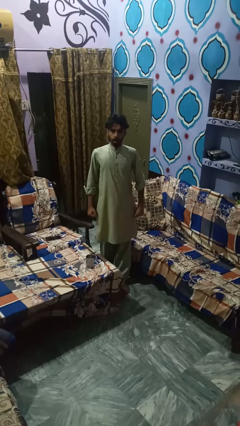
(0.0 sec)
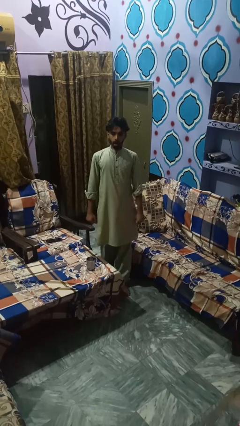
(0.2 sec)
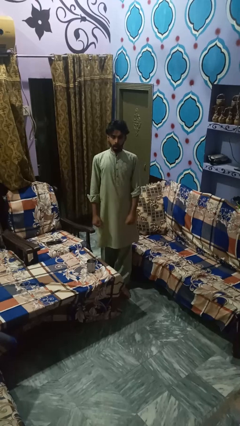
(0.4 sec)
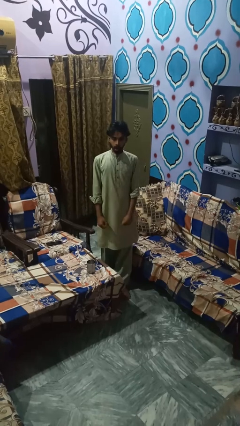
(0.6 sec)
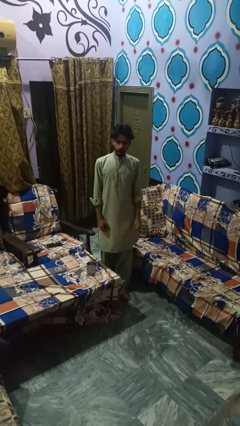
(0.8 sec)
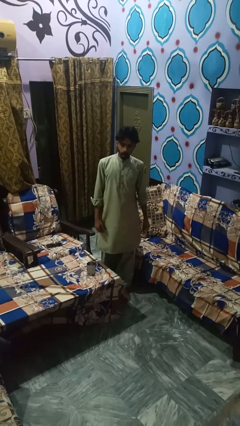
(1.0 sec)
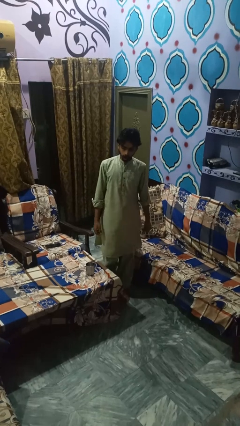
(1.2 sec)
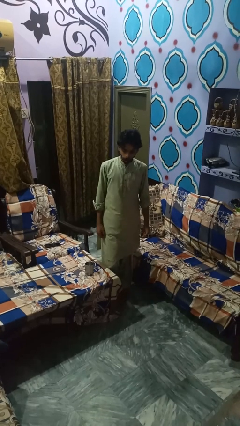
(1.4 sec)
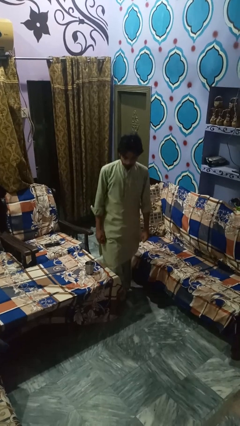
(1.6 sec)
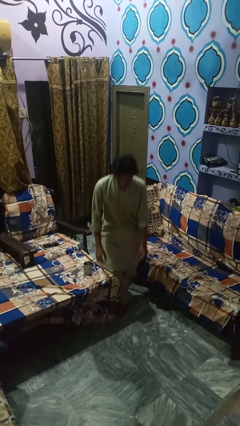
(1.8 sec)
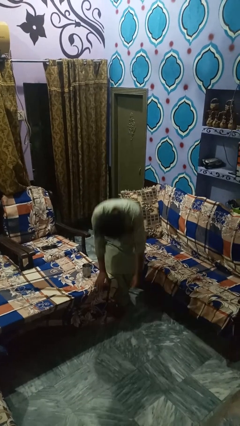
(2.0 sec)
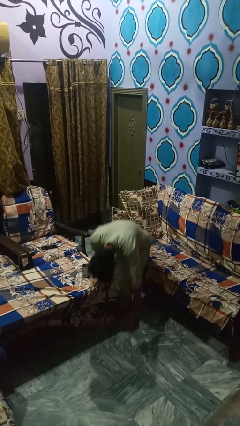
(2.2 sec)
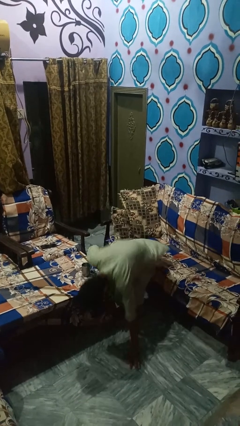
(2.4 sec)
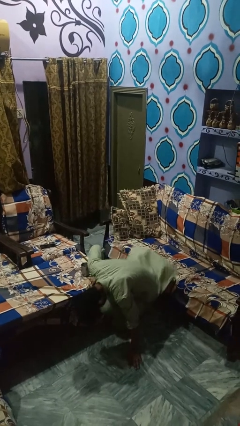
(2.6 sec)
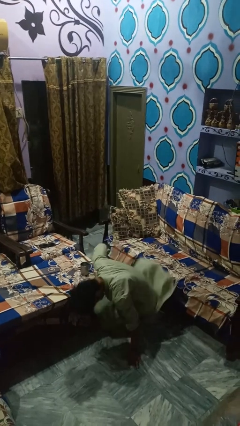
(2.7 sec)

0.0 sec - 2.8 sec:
person trips on object on floor

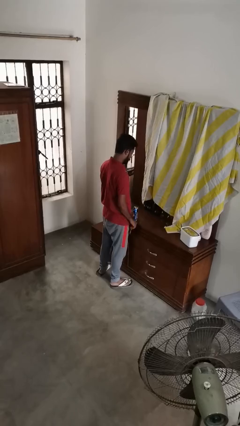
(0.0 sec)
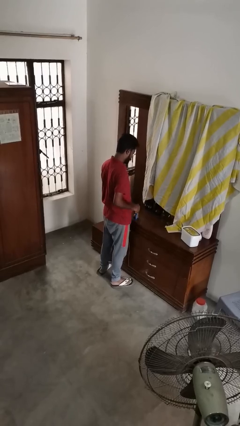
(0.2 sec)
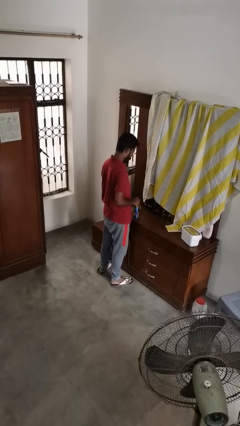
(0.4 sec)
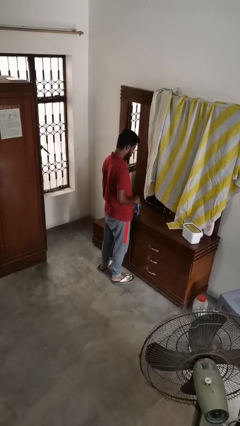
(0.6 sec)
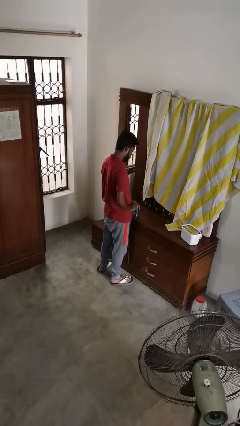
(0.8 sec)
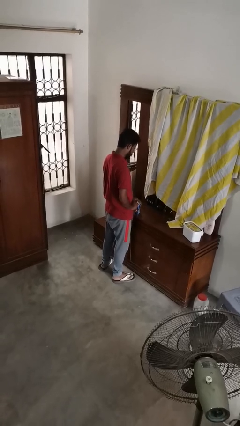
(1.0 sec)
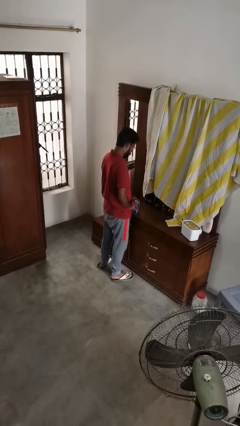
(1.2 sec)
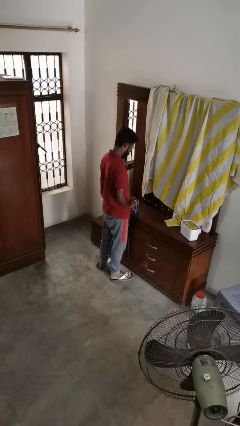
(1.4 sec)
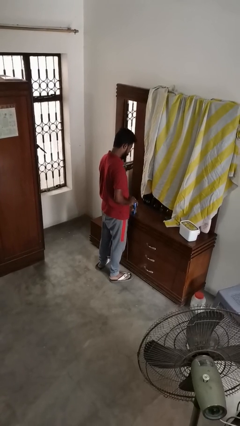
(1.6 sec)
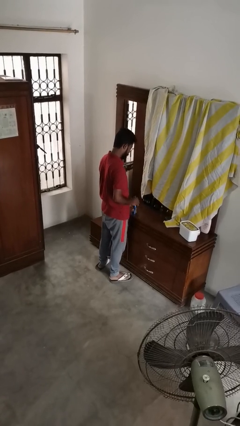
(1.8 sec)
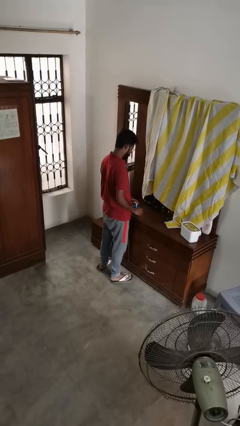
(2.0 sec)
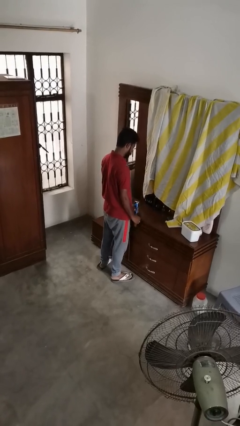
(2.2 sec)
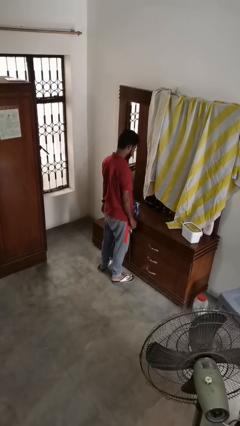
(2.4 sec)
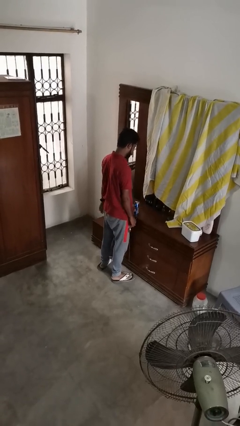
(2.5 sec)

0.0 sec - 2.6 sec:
person opens can with can opener

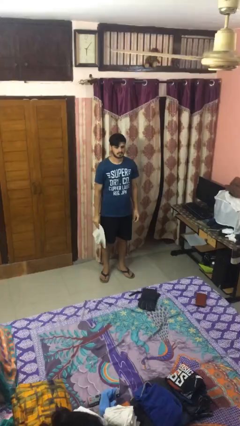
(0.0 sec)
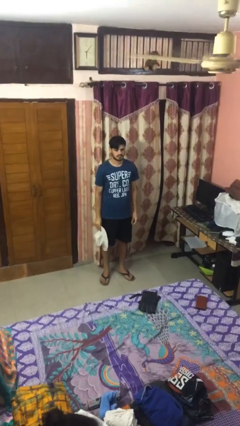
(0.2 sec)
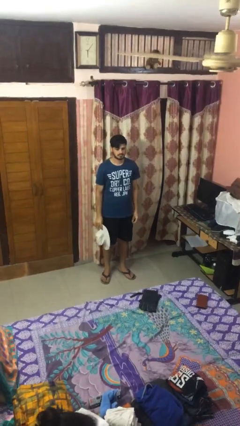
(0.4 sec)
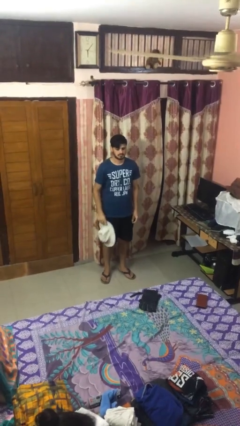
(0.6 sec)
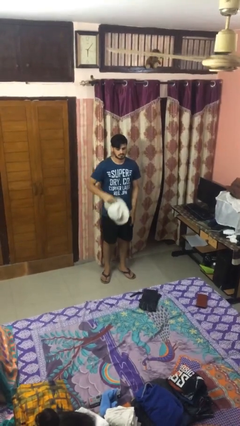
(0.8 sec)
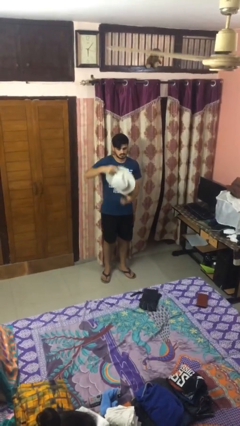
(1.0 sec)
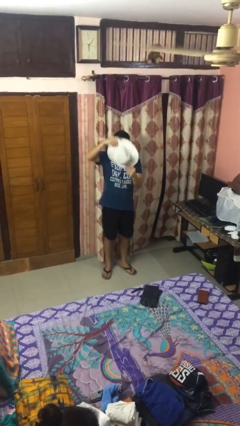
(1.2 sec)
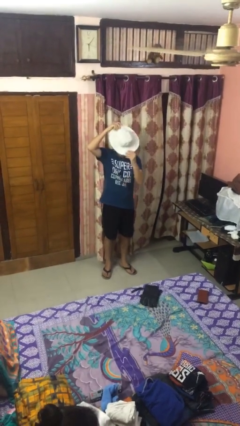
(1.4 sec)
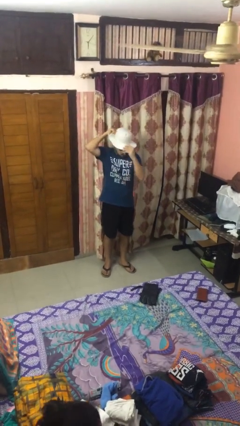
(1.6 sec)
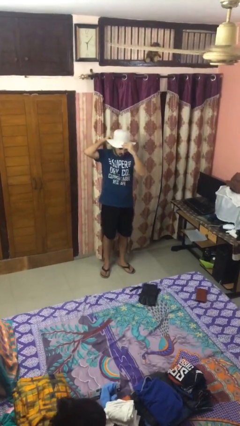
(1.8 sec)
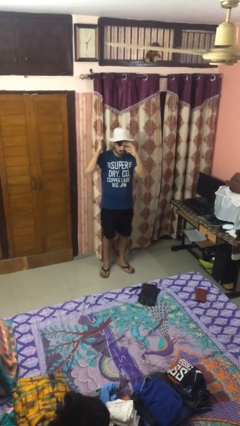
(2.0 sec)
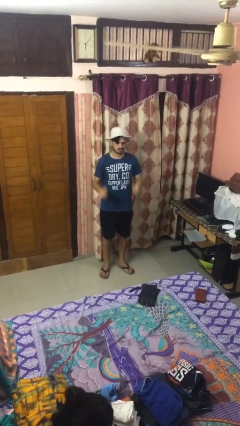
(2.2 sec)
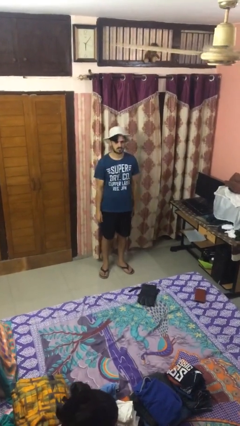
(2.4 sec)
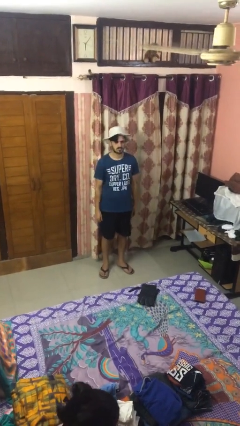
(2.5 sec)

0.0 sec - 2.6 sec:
person puts on hat

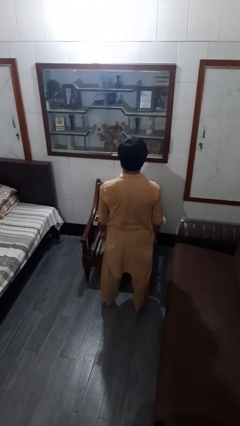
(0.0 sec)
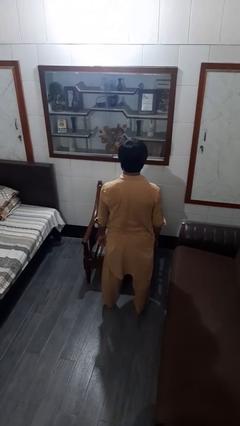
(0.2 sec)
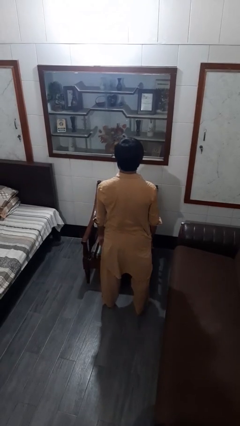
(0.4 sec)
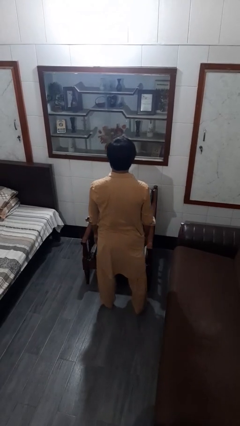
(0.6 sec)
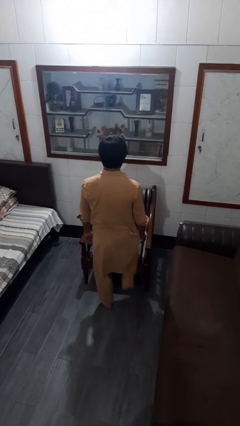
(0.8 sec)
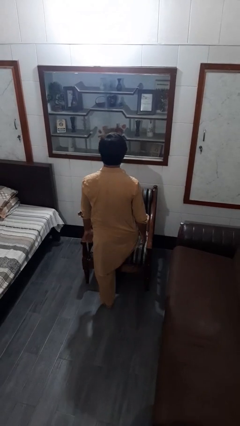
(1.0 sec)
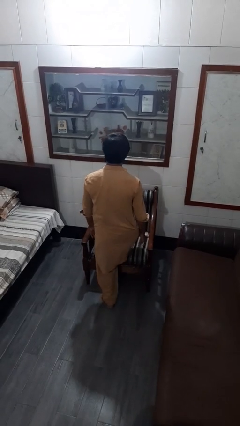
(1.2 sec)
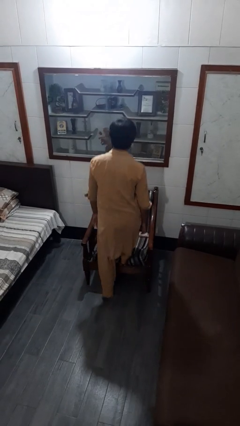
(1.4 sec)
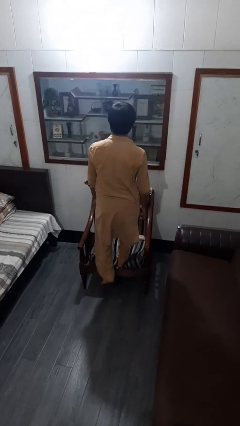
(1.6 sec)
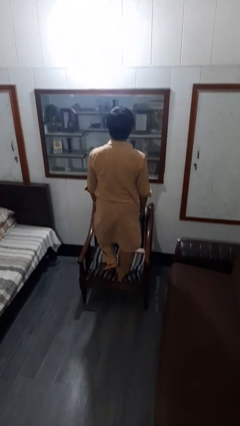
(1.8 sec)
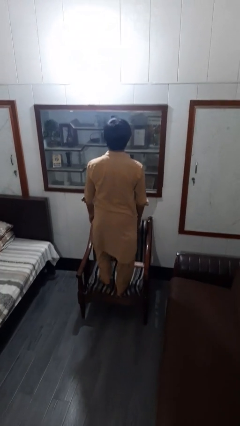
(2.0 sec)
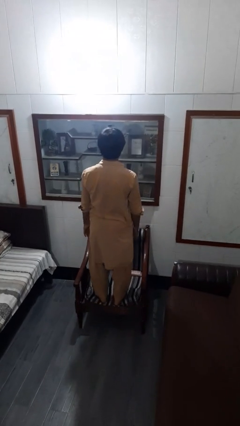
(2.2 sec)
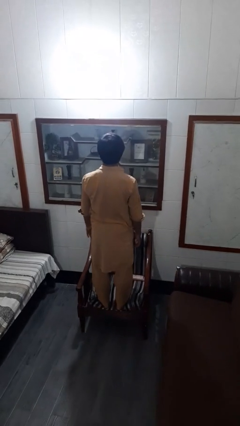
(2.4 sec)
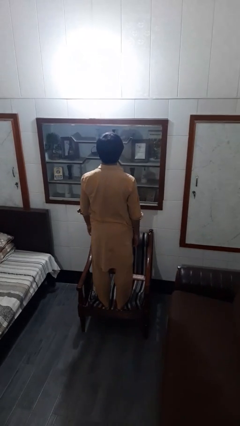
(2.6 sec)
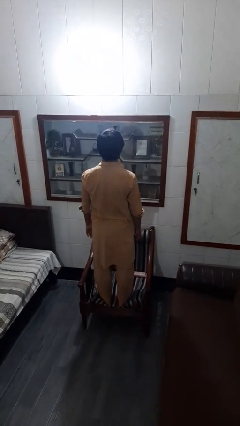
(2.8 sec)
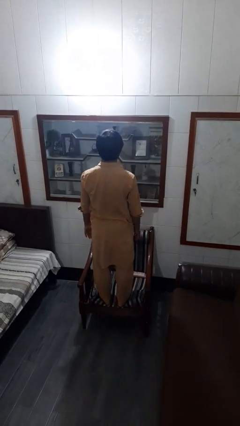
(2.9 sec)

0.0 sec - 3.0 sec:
person climbs on chair

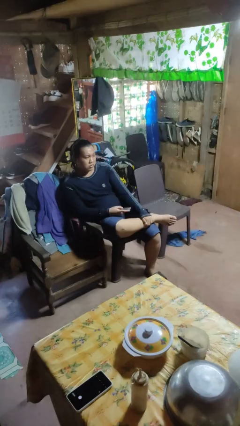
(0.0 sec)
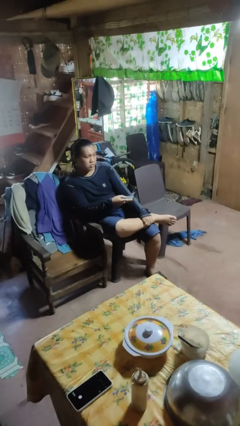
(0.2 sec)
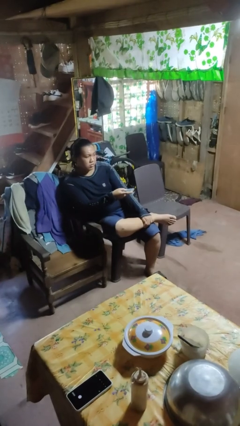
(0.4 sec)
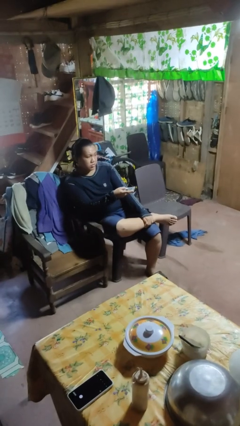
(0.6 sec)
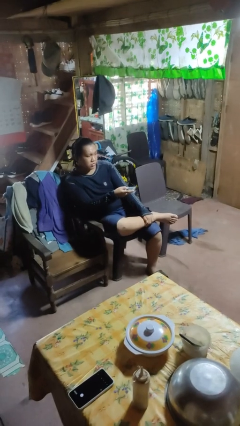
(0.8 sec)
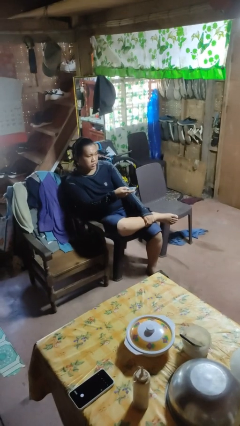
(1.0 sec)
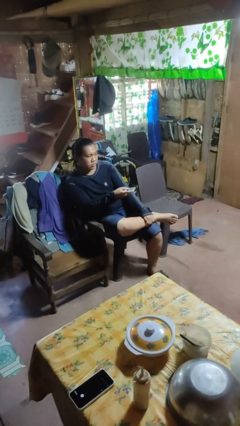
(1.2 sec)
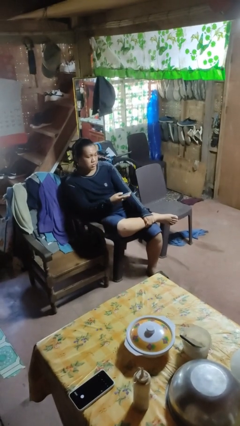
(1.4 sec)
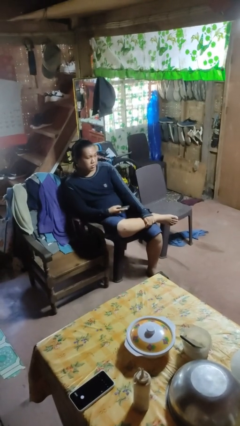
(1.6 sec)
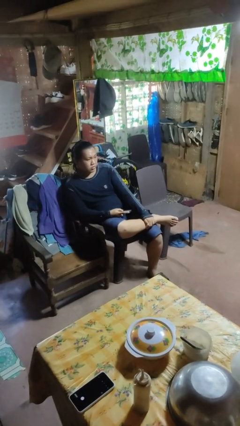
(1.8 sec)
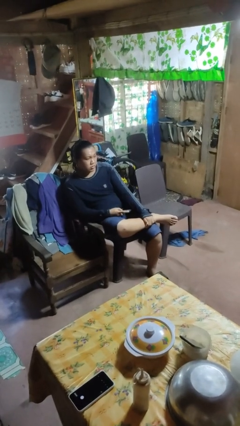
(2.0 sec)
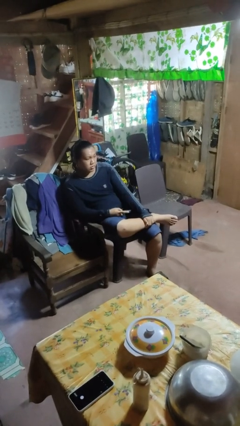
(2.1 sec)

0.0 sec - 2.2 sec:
person uses television remote

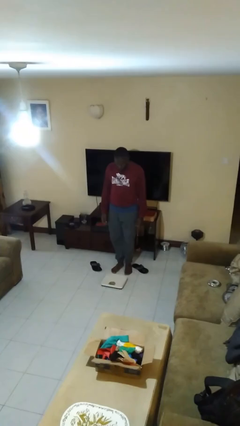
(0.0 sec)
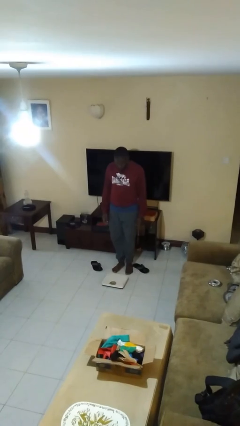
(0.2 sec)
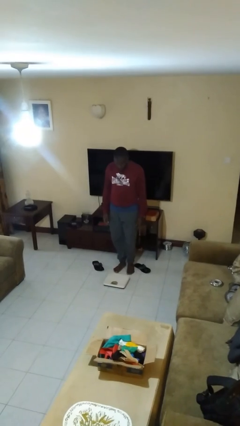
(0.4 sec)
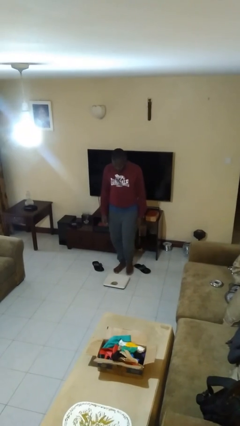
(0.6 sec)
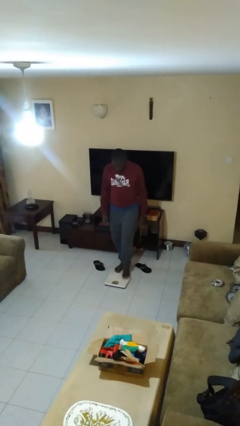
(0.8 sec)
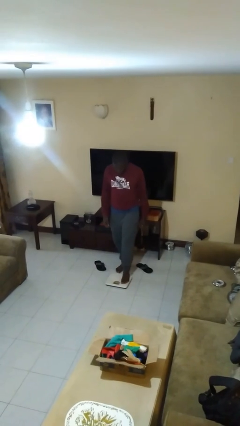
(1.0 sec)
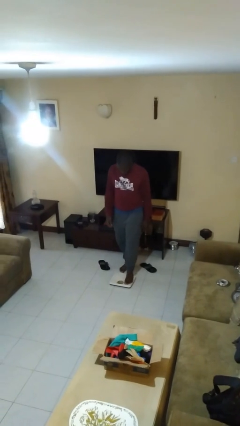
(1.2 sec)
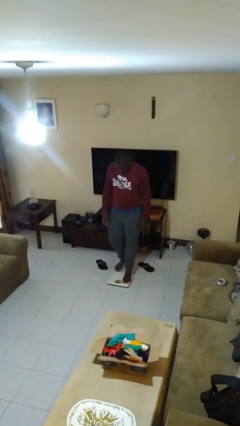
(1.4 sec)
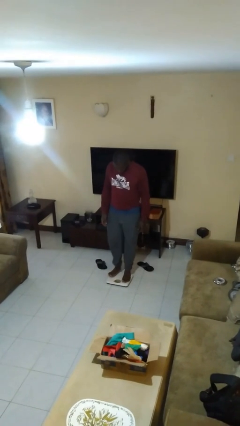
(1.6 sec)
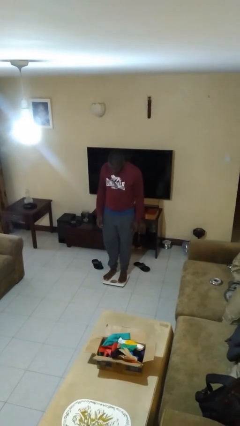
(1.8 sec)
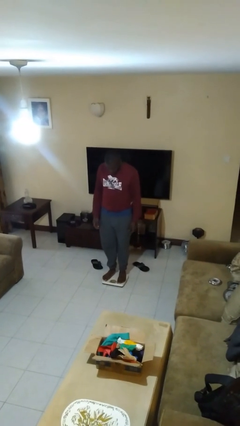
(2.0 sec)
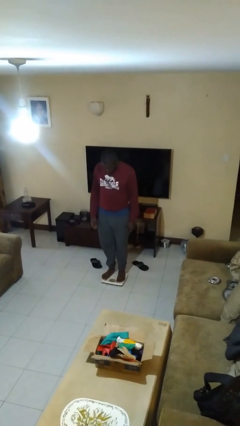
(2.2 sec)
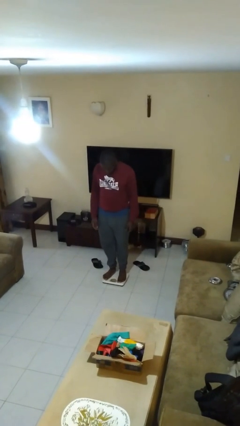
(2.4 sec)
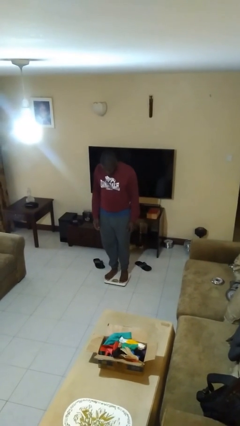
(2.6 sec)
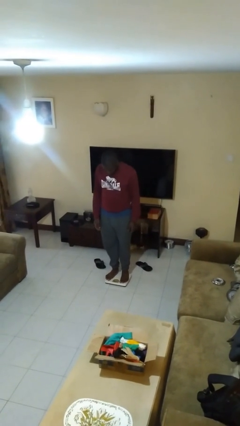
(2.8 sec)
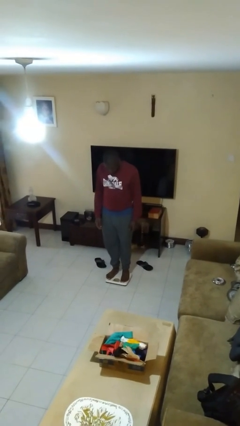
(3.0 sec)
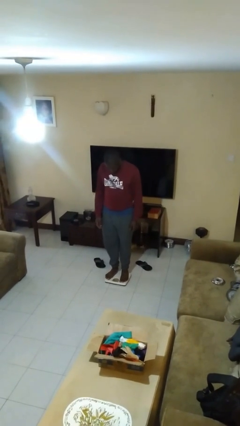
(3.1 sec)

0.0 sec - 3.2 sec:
person uses bodyweight scale

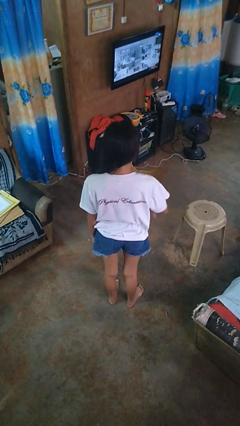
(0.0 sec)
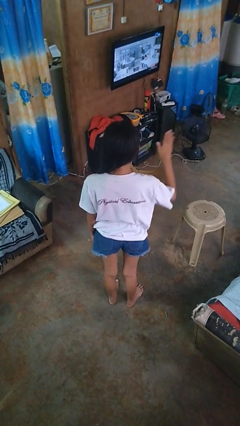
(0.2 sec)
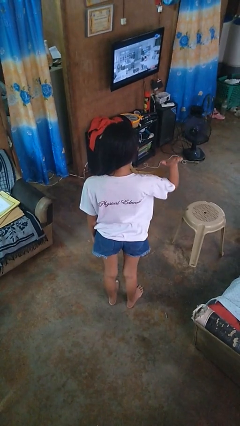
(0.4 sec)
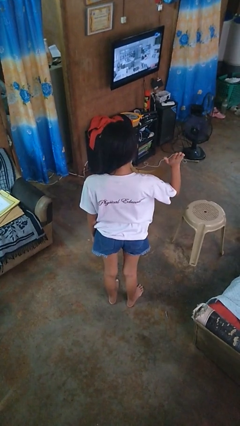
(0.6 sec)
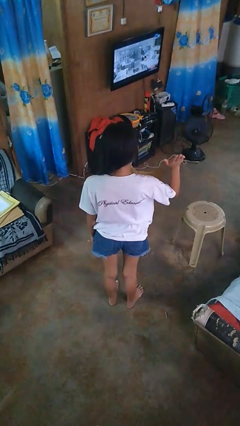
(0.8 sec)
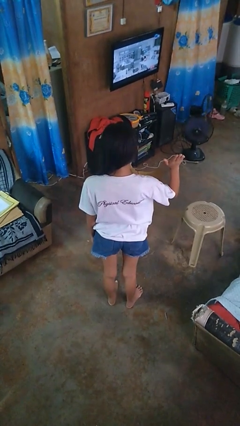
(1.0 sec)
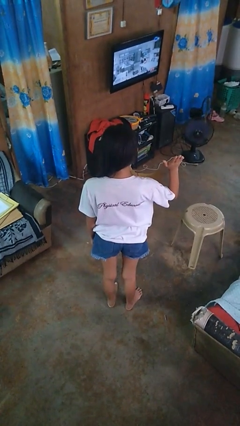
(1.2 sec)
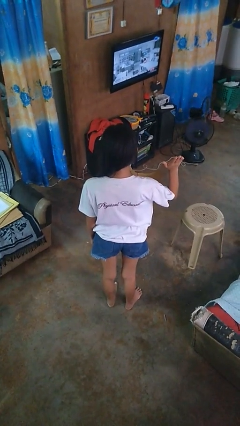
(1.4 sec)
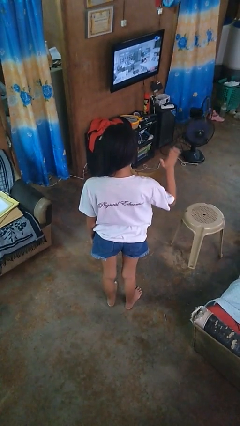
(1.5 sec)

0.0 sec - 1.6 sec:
person gestures number five
